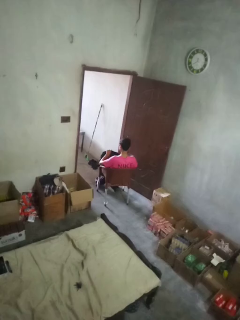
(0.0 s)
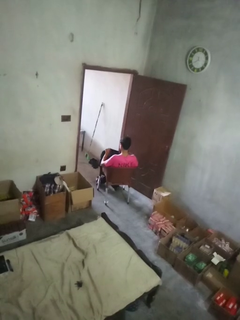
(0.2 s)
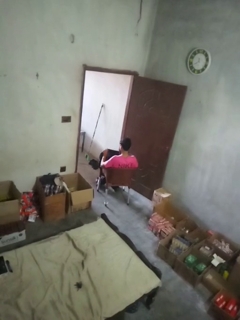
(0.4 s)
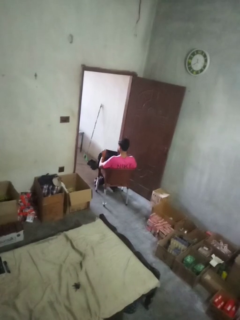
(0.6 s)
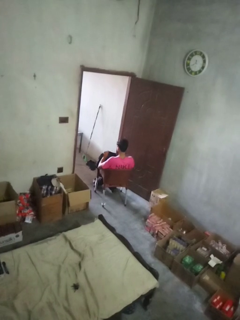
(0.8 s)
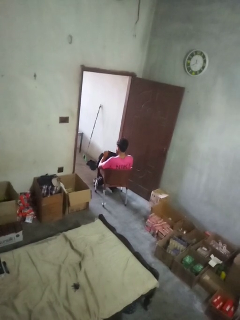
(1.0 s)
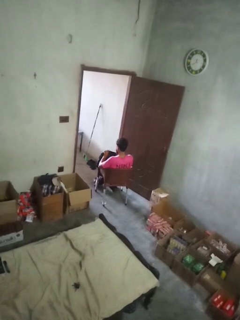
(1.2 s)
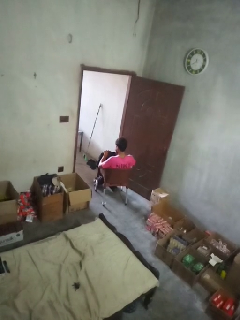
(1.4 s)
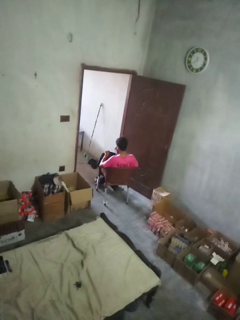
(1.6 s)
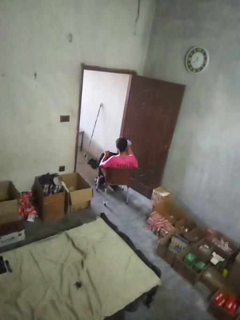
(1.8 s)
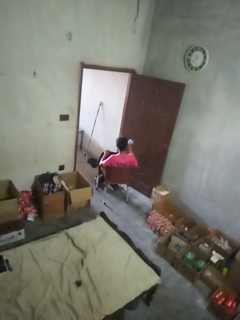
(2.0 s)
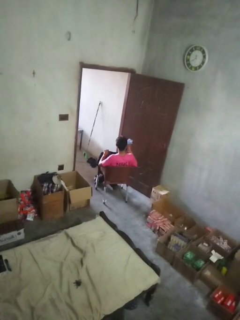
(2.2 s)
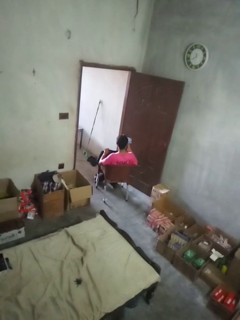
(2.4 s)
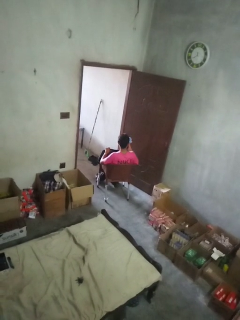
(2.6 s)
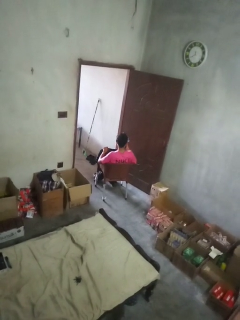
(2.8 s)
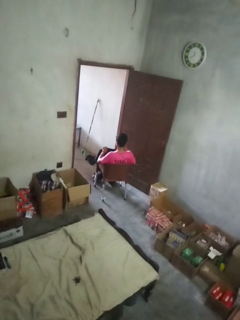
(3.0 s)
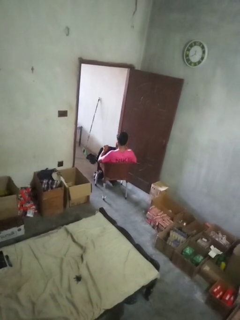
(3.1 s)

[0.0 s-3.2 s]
person takes object from backpack

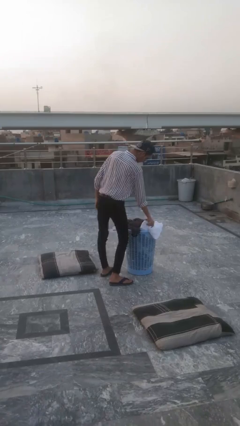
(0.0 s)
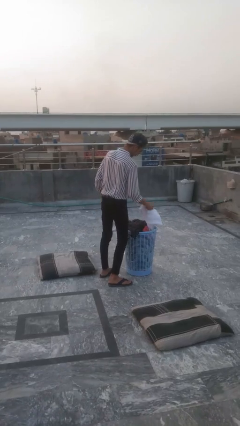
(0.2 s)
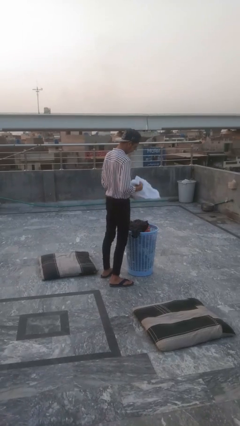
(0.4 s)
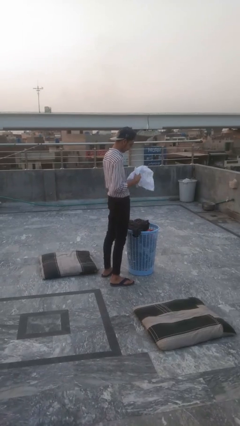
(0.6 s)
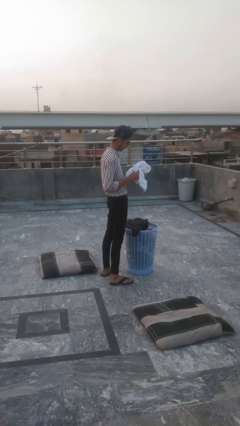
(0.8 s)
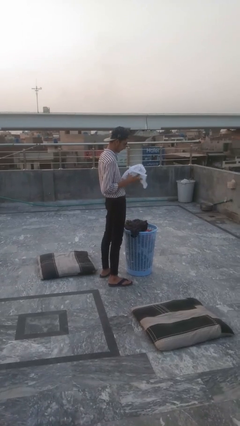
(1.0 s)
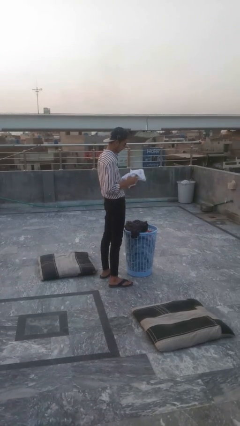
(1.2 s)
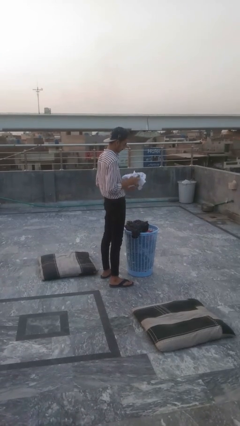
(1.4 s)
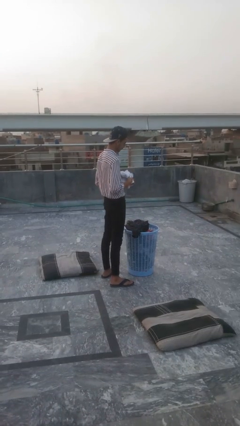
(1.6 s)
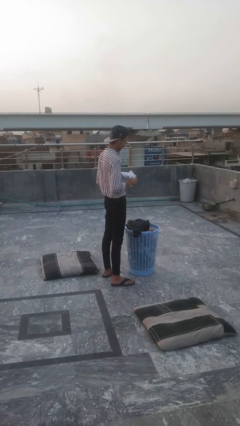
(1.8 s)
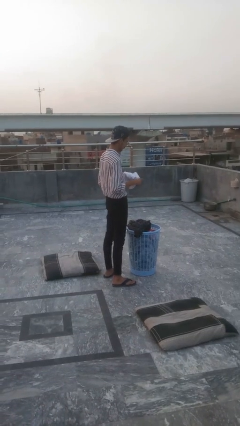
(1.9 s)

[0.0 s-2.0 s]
person takes object from basket

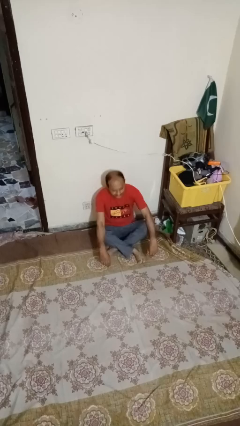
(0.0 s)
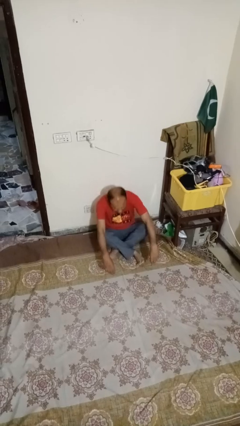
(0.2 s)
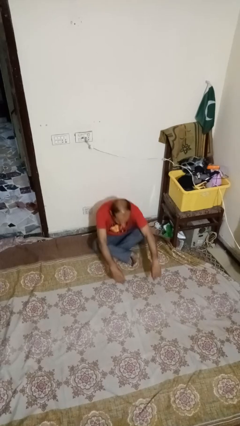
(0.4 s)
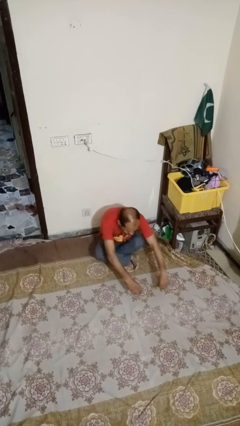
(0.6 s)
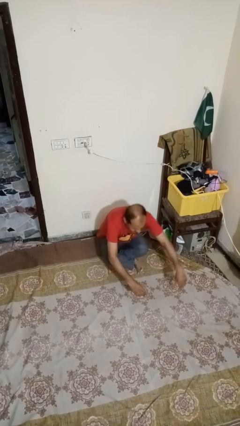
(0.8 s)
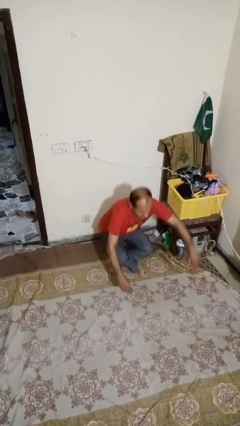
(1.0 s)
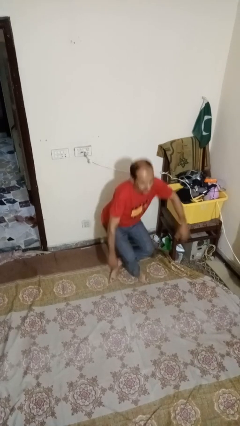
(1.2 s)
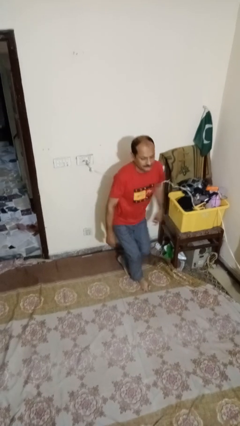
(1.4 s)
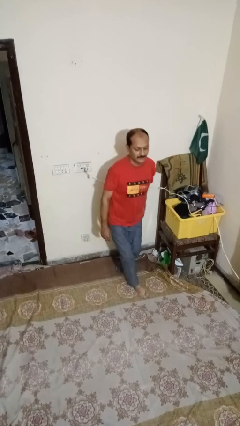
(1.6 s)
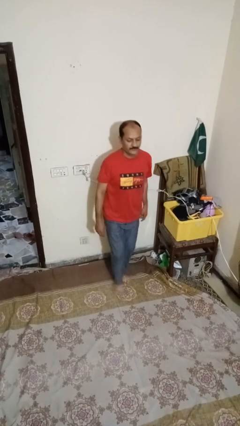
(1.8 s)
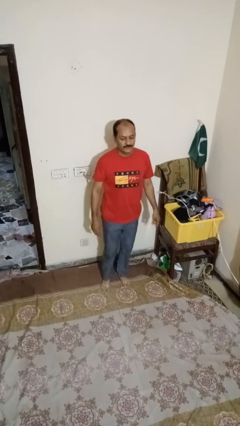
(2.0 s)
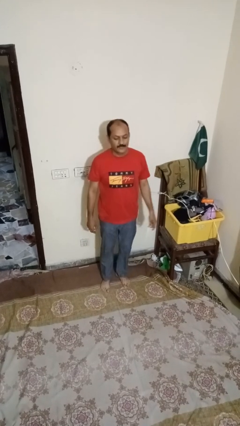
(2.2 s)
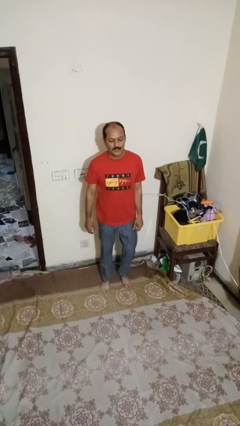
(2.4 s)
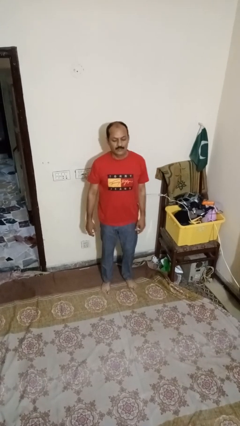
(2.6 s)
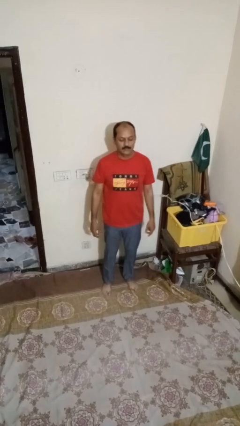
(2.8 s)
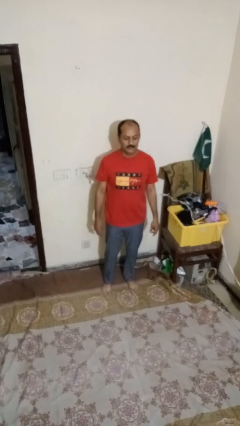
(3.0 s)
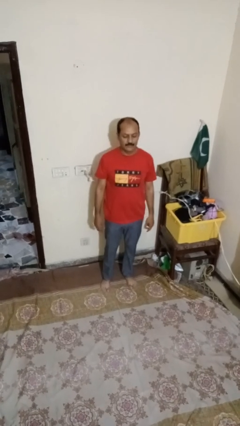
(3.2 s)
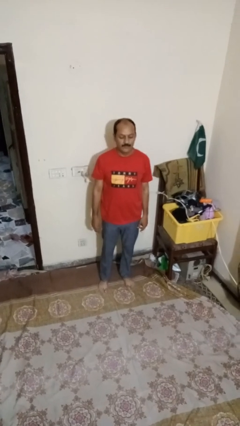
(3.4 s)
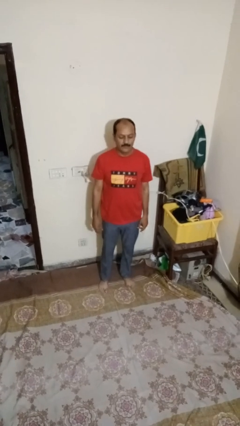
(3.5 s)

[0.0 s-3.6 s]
person stands up from floor

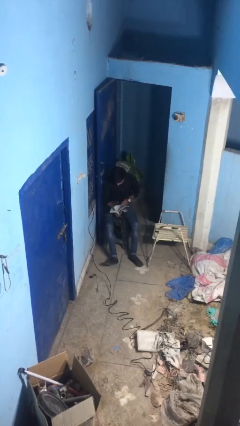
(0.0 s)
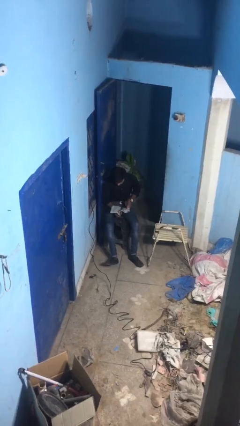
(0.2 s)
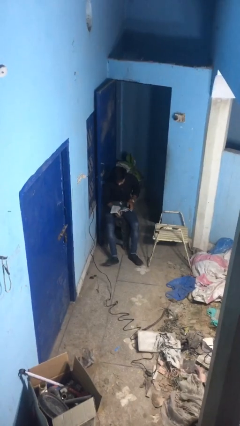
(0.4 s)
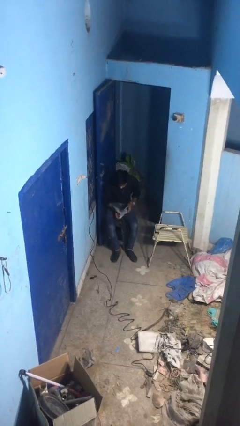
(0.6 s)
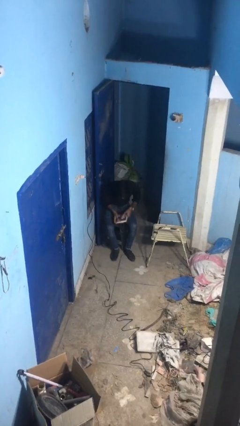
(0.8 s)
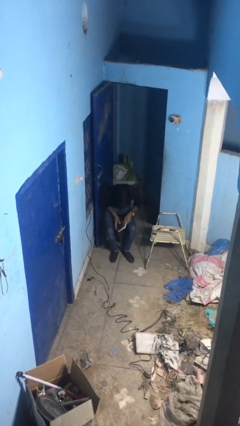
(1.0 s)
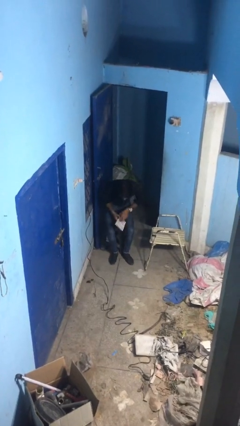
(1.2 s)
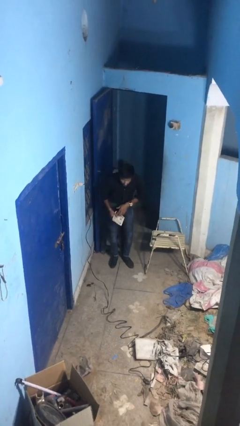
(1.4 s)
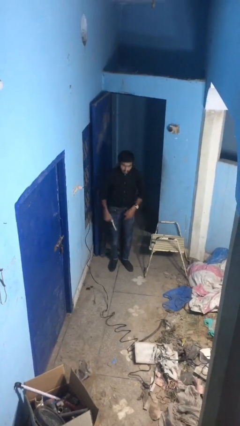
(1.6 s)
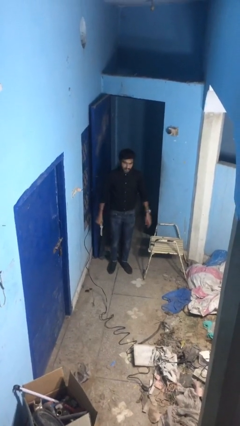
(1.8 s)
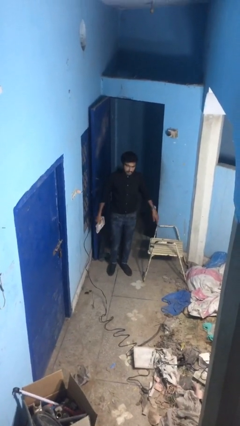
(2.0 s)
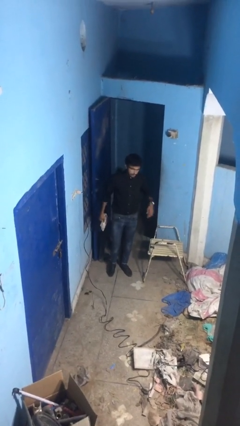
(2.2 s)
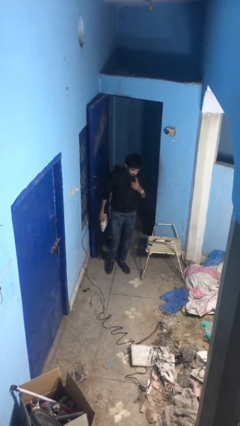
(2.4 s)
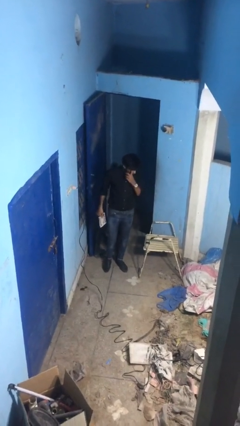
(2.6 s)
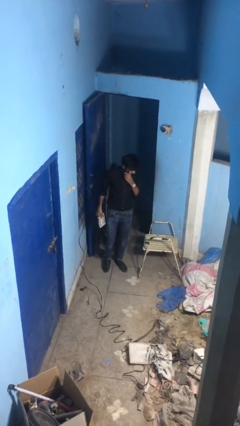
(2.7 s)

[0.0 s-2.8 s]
person stands up

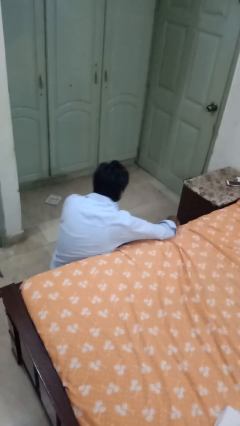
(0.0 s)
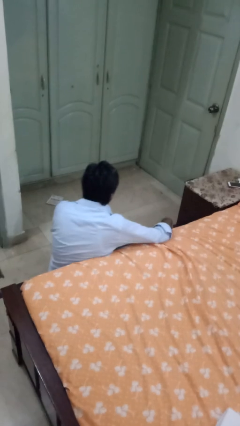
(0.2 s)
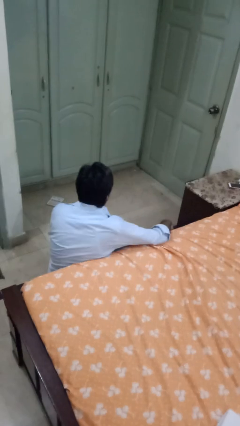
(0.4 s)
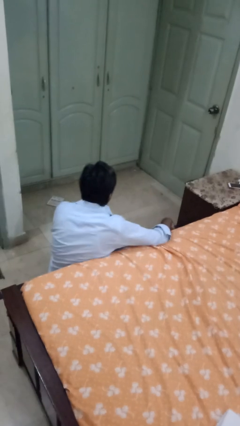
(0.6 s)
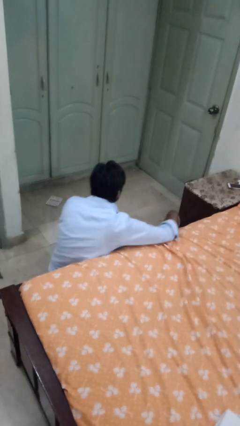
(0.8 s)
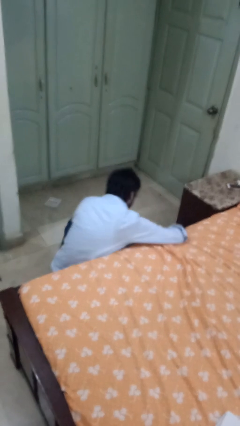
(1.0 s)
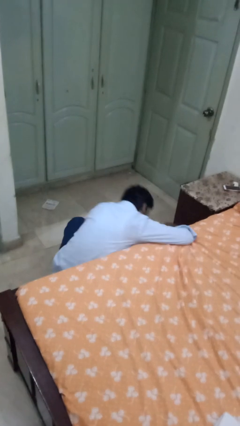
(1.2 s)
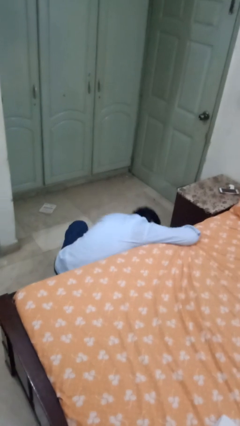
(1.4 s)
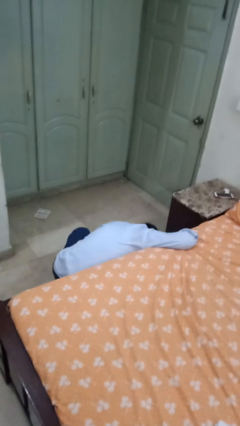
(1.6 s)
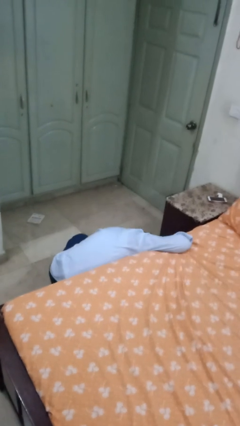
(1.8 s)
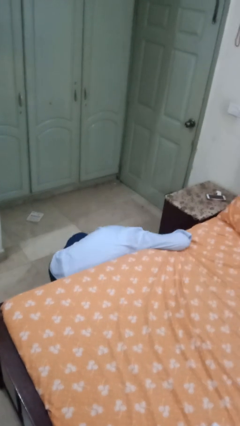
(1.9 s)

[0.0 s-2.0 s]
person searches under bed

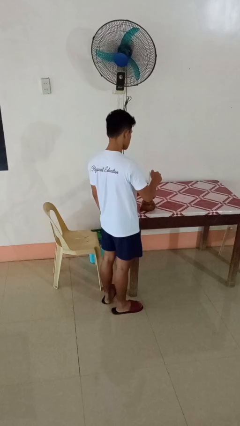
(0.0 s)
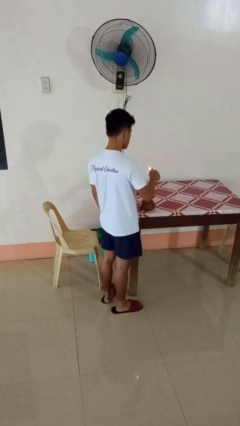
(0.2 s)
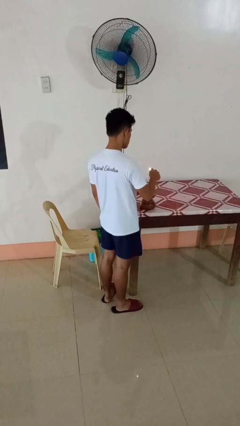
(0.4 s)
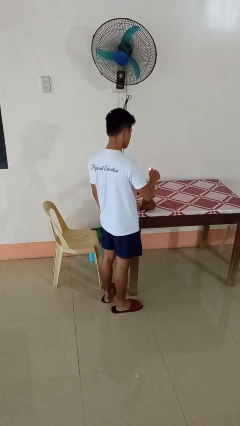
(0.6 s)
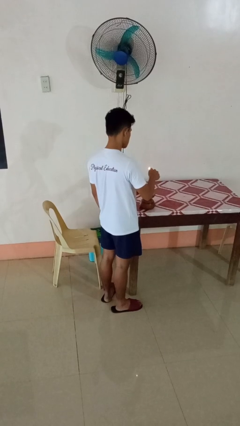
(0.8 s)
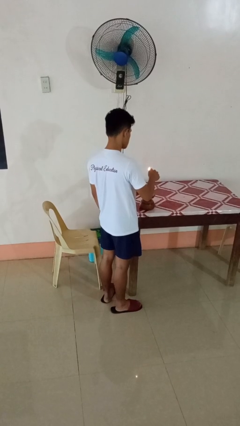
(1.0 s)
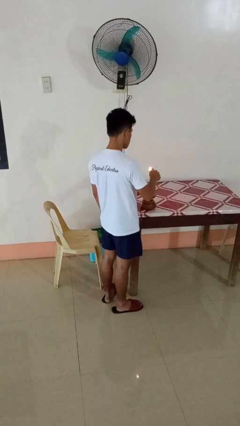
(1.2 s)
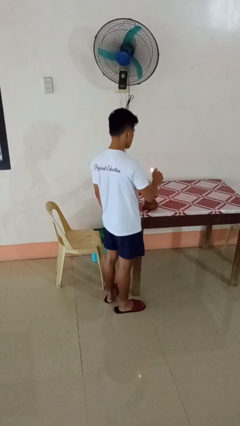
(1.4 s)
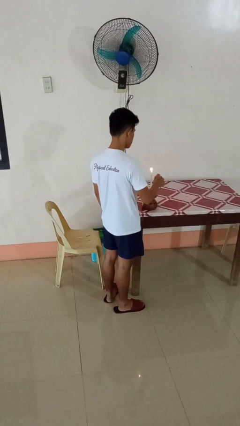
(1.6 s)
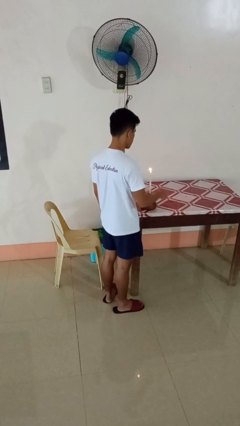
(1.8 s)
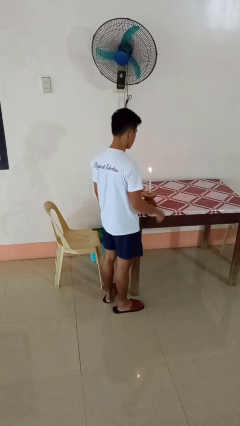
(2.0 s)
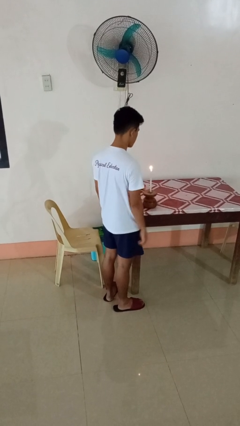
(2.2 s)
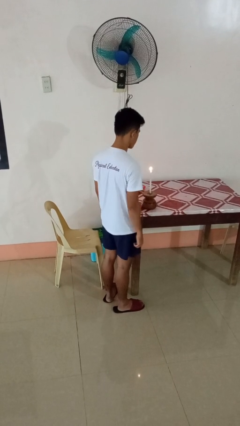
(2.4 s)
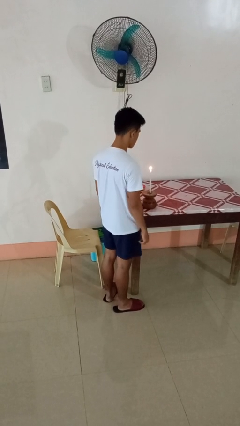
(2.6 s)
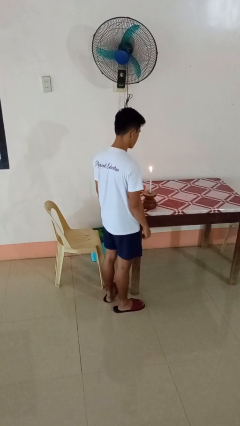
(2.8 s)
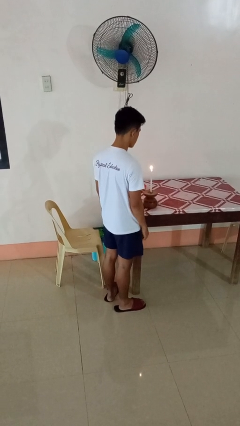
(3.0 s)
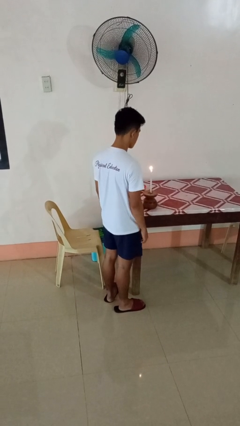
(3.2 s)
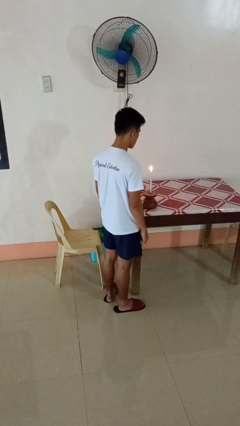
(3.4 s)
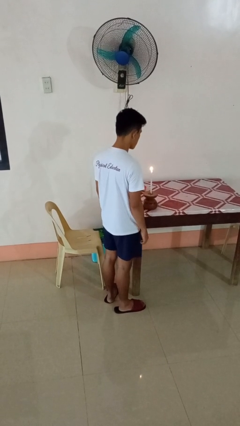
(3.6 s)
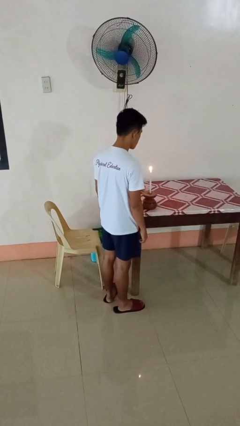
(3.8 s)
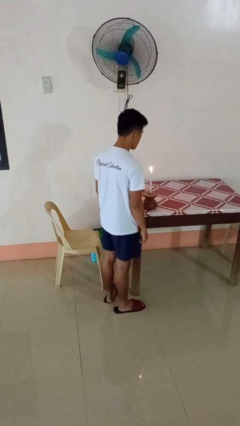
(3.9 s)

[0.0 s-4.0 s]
person lights candle

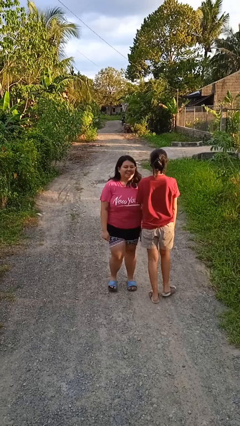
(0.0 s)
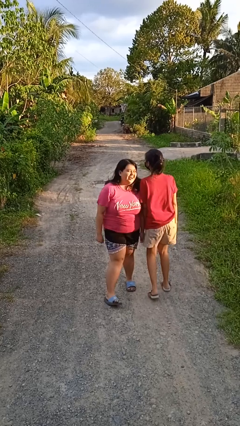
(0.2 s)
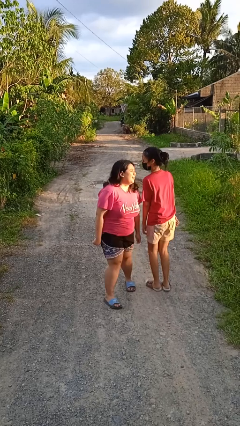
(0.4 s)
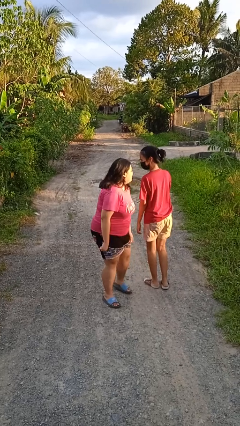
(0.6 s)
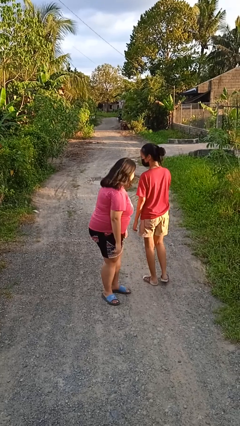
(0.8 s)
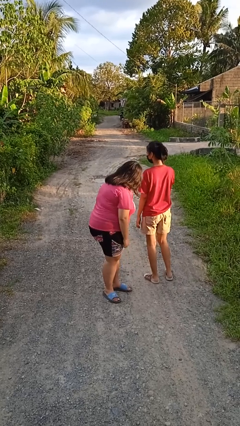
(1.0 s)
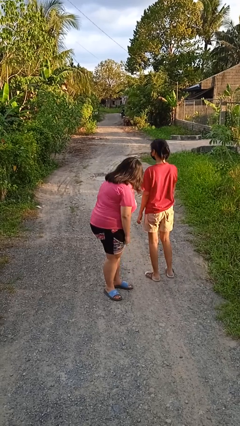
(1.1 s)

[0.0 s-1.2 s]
person bumps into person
